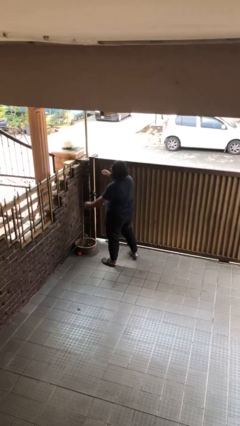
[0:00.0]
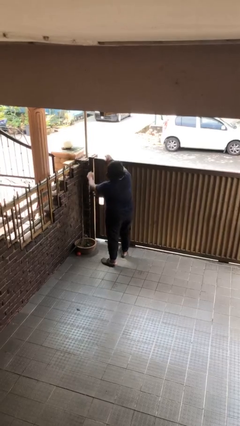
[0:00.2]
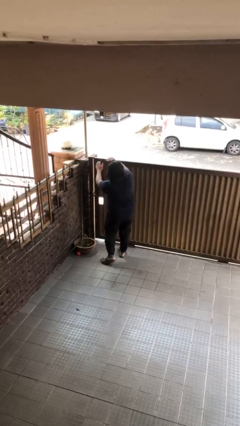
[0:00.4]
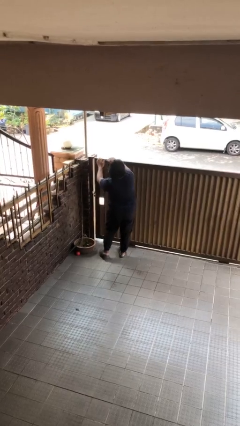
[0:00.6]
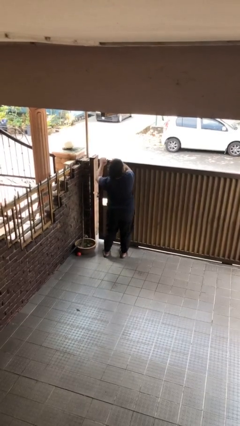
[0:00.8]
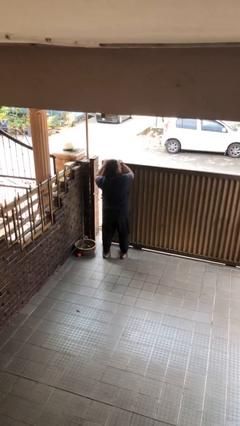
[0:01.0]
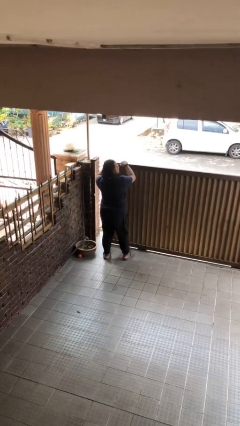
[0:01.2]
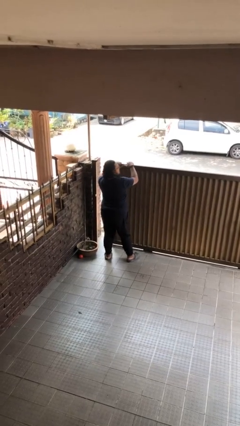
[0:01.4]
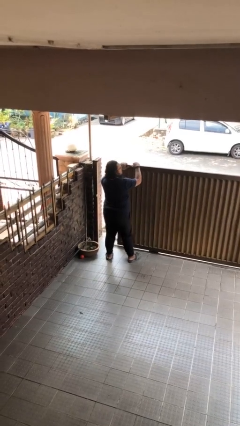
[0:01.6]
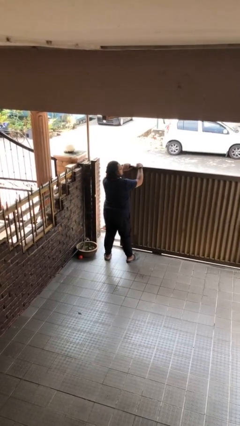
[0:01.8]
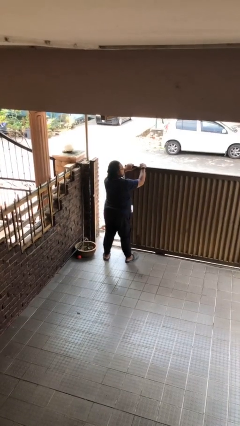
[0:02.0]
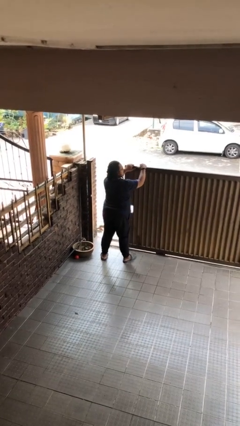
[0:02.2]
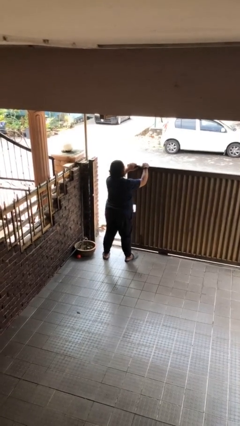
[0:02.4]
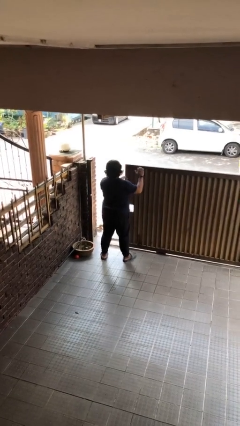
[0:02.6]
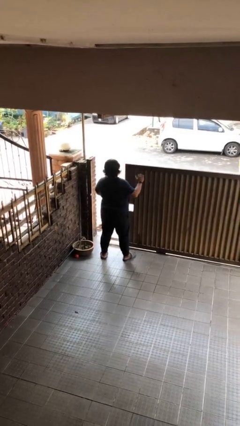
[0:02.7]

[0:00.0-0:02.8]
person opens facility door

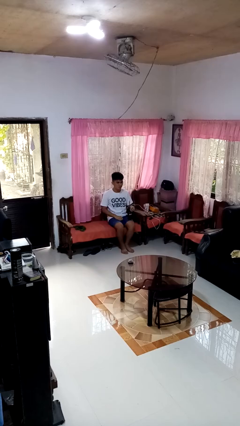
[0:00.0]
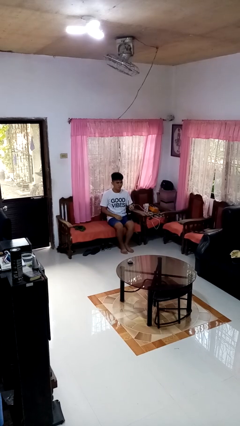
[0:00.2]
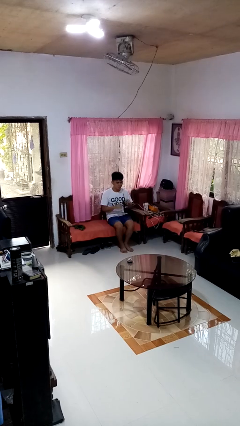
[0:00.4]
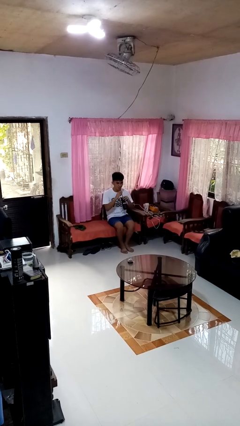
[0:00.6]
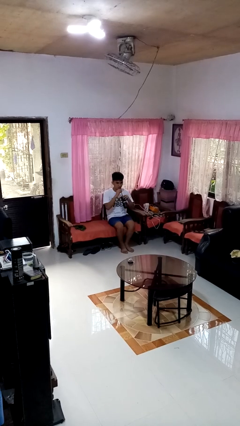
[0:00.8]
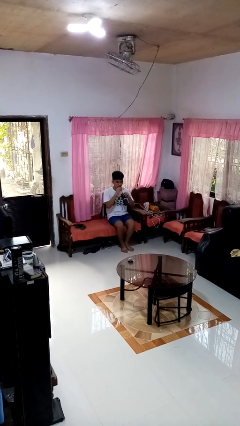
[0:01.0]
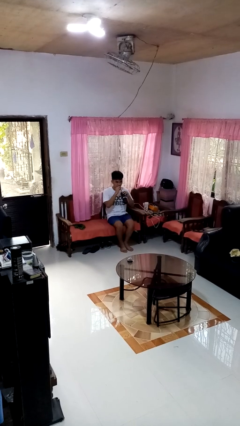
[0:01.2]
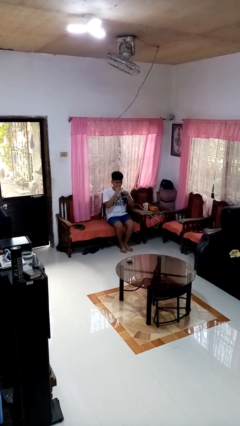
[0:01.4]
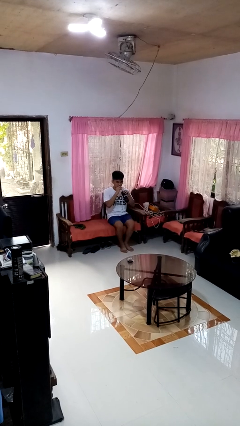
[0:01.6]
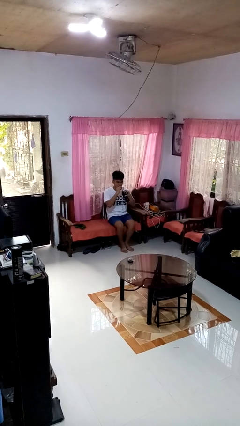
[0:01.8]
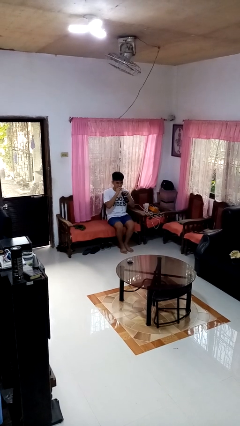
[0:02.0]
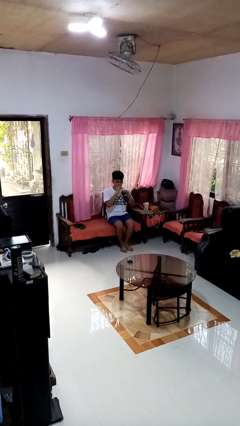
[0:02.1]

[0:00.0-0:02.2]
person drinks from straw

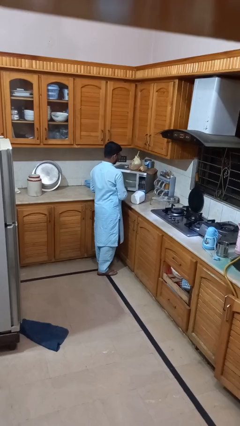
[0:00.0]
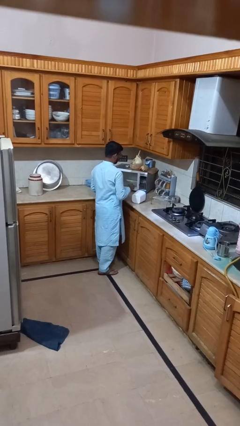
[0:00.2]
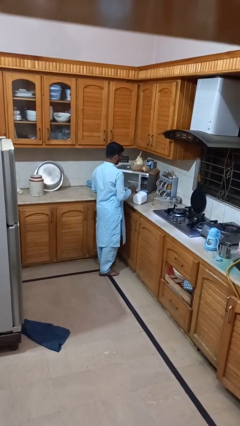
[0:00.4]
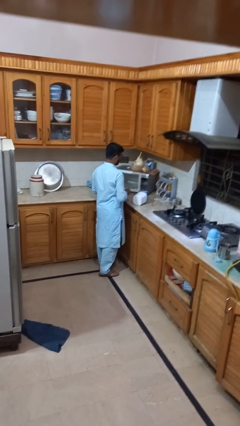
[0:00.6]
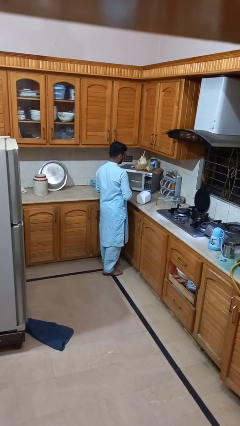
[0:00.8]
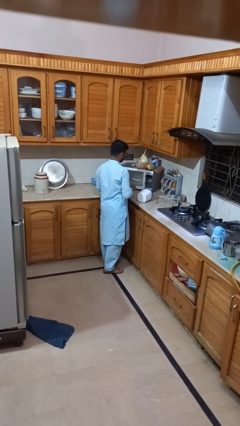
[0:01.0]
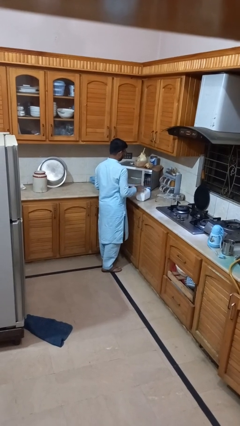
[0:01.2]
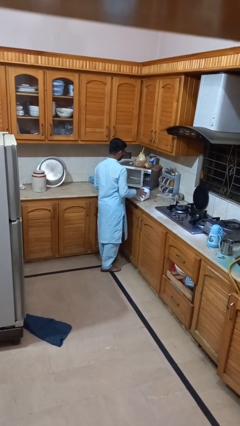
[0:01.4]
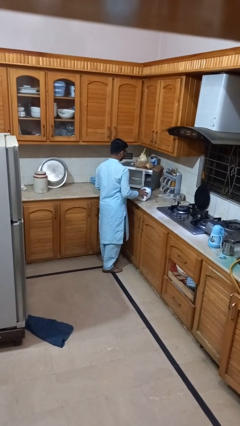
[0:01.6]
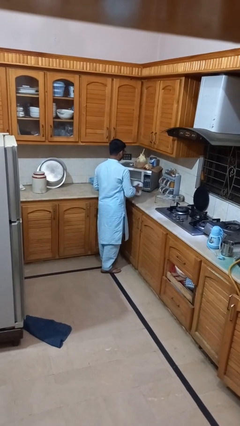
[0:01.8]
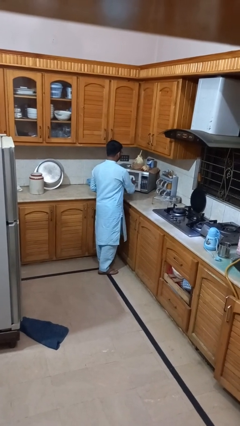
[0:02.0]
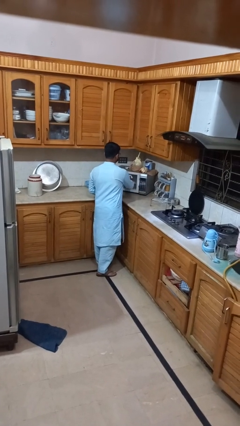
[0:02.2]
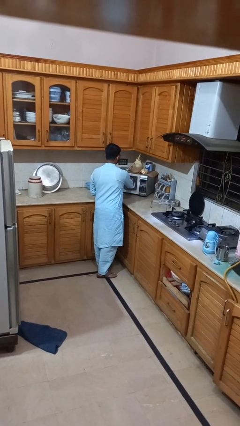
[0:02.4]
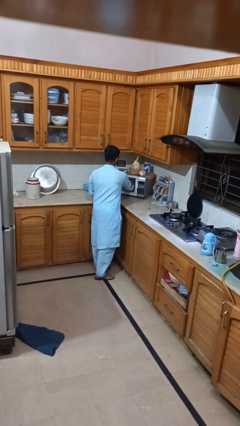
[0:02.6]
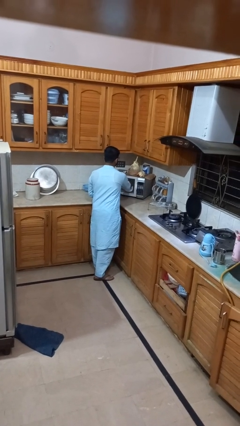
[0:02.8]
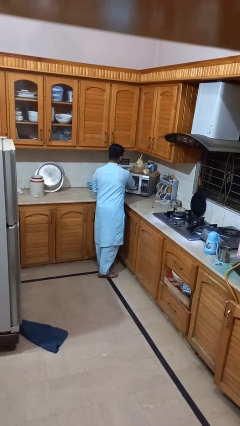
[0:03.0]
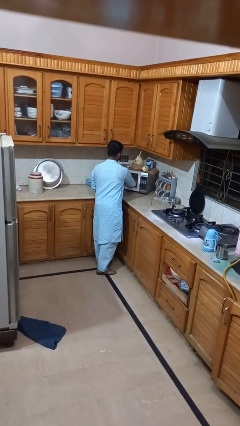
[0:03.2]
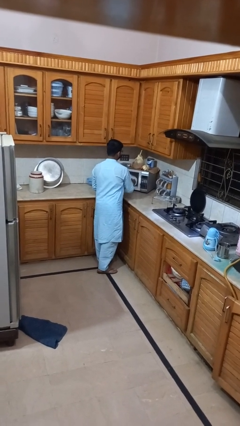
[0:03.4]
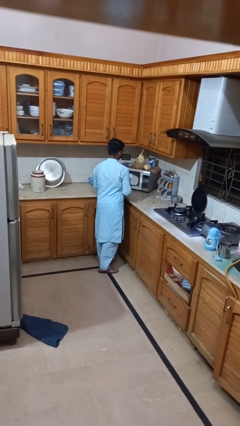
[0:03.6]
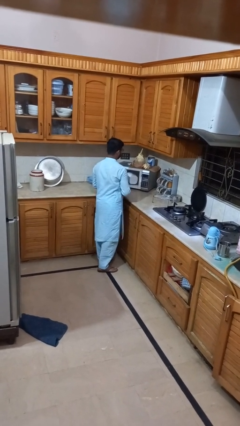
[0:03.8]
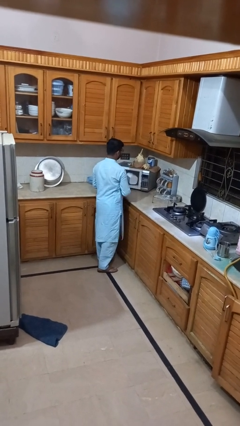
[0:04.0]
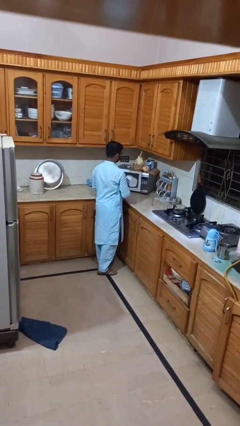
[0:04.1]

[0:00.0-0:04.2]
person puts object into microwave

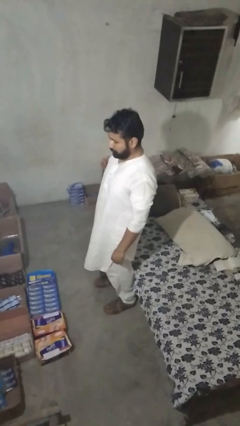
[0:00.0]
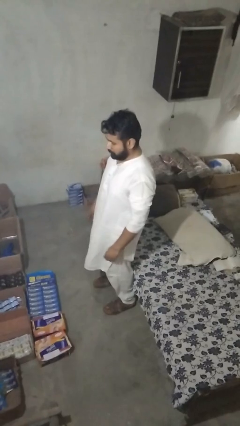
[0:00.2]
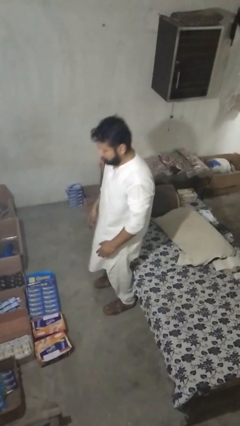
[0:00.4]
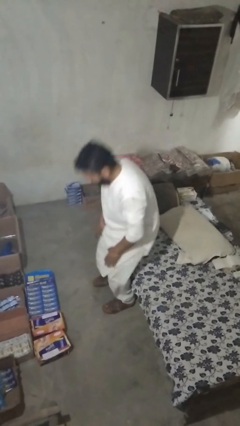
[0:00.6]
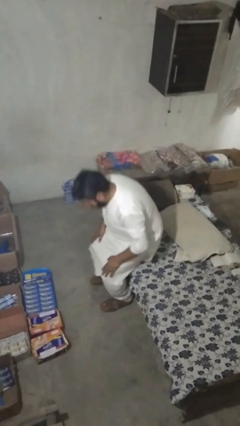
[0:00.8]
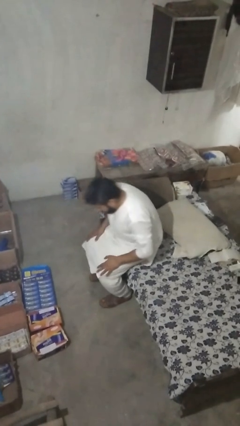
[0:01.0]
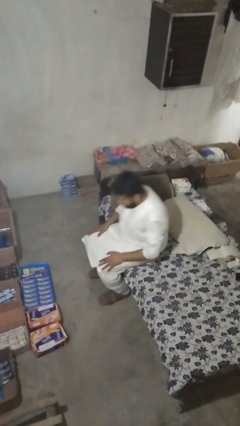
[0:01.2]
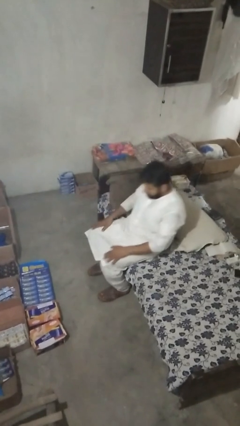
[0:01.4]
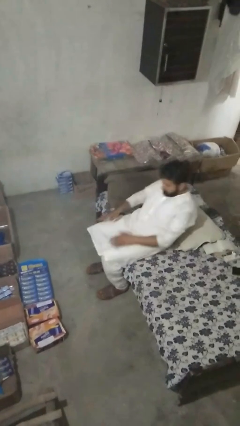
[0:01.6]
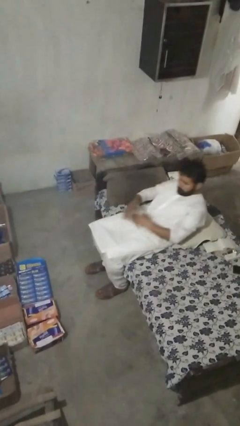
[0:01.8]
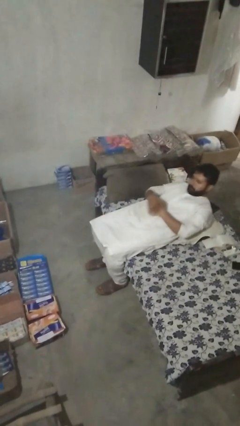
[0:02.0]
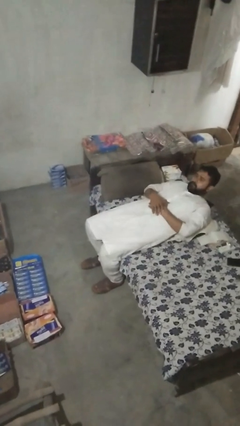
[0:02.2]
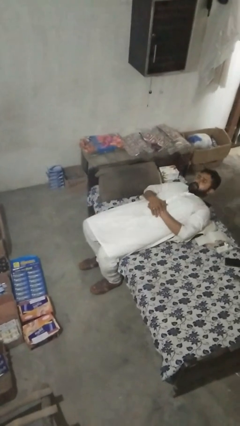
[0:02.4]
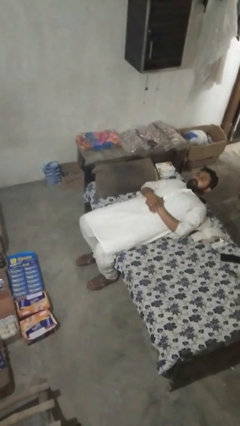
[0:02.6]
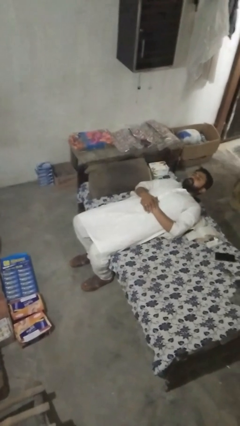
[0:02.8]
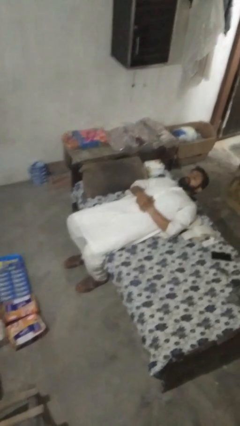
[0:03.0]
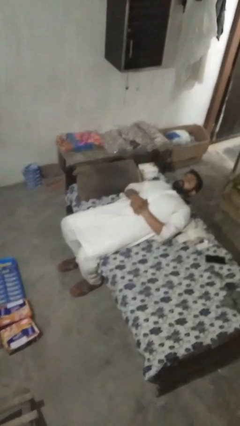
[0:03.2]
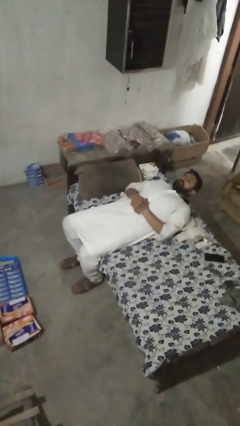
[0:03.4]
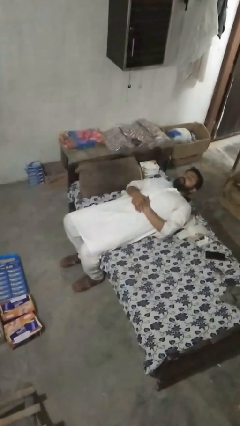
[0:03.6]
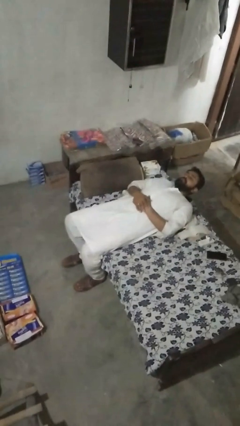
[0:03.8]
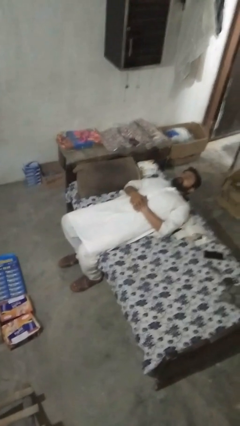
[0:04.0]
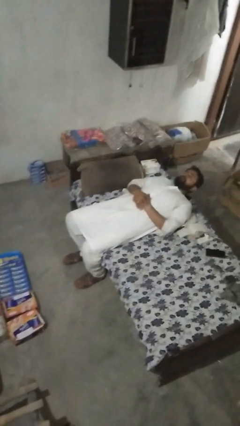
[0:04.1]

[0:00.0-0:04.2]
person lies down on couch

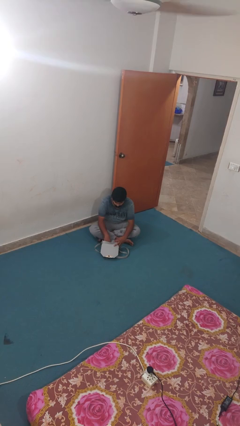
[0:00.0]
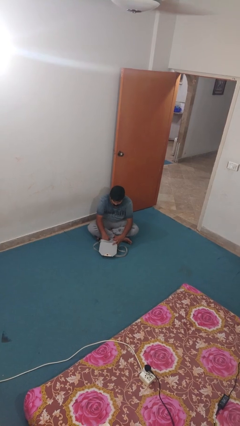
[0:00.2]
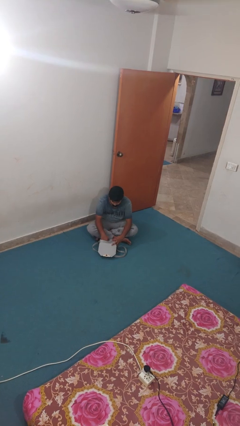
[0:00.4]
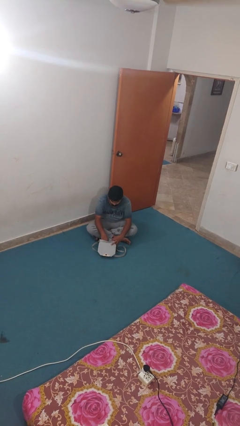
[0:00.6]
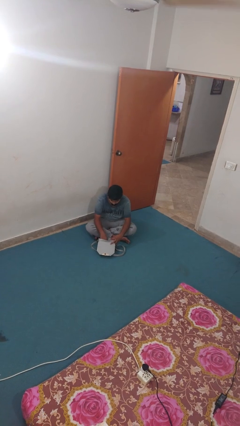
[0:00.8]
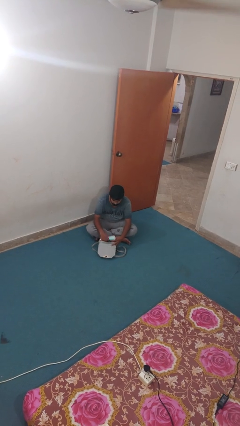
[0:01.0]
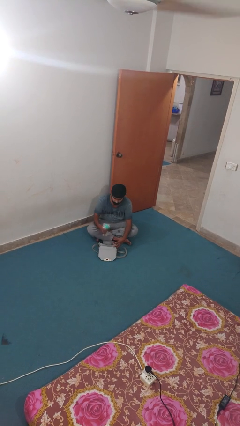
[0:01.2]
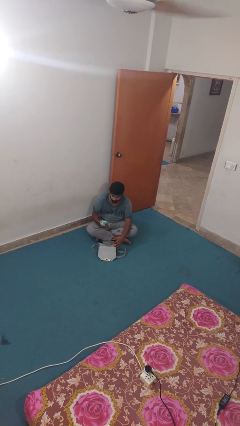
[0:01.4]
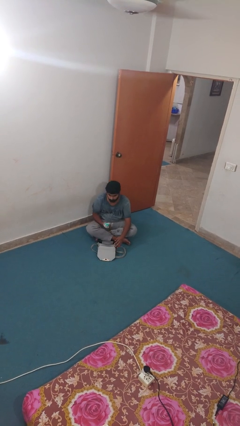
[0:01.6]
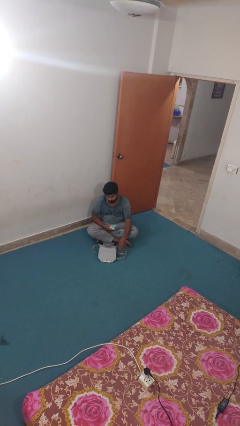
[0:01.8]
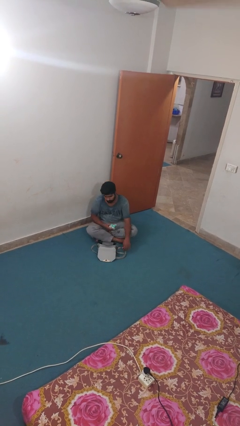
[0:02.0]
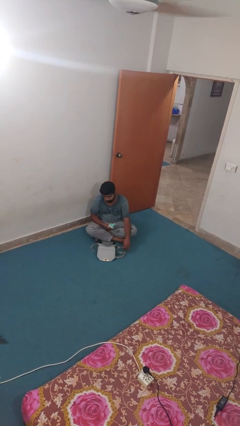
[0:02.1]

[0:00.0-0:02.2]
person takes object from purse

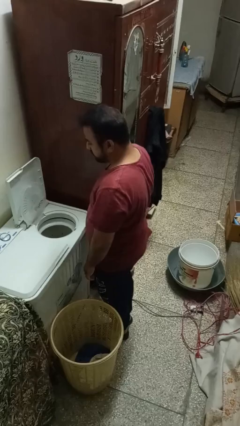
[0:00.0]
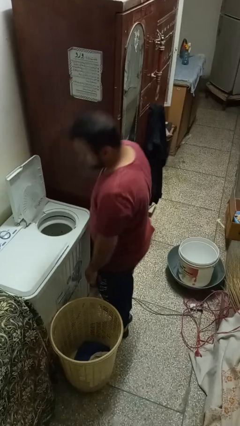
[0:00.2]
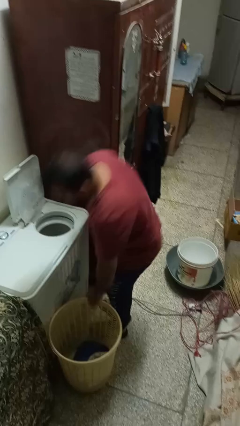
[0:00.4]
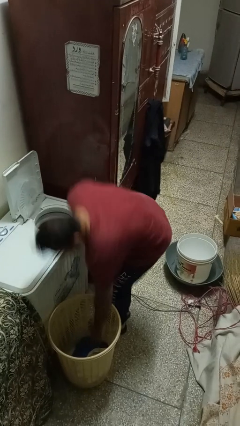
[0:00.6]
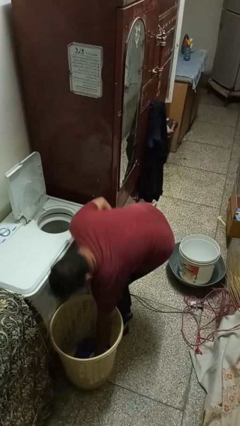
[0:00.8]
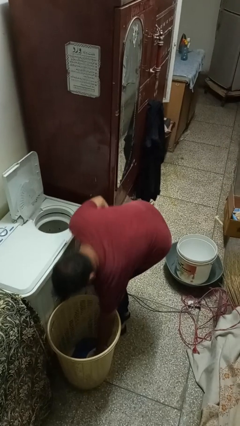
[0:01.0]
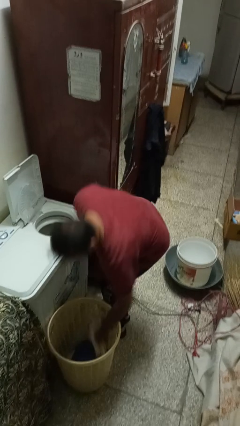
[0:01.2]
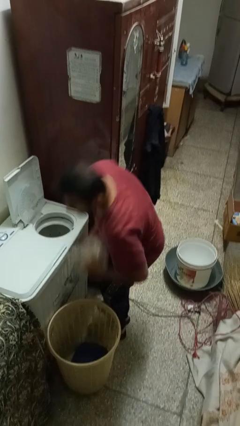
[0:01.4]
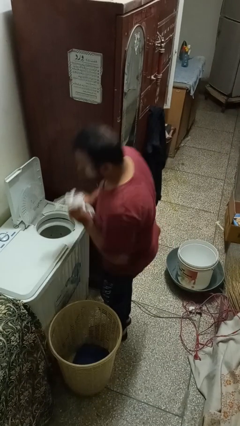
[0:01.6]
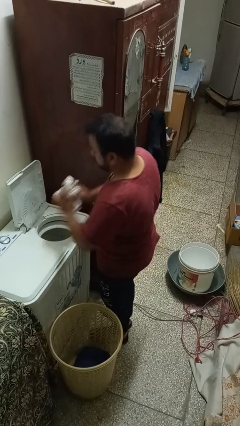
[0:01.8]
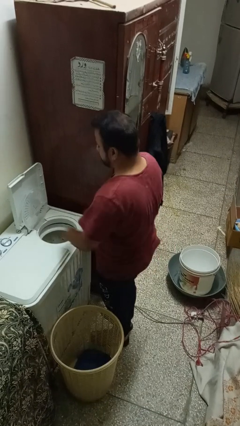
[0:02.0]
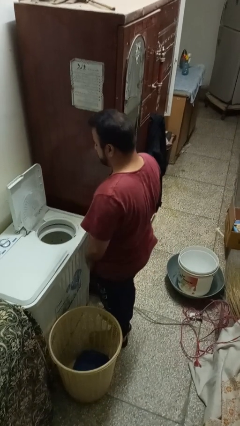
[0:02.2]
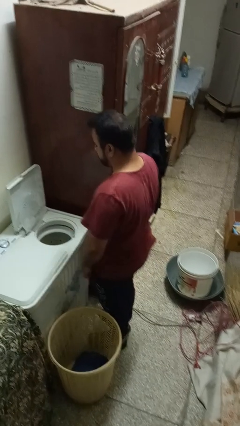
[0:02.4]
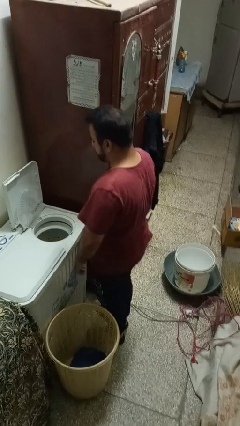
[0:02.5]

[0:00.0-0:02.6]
person loads dryer
